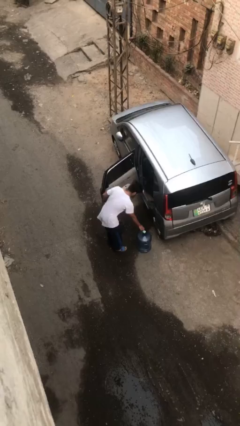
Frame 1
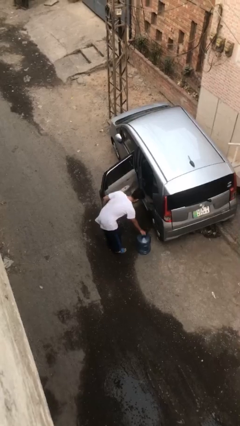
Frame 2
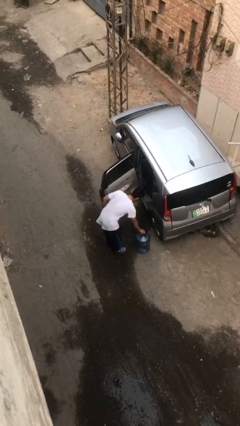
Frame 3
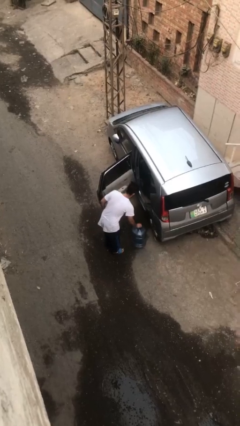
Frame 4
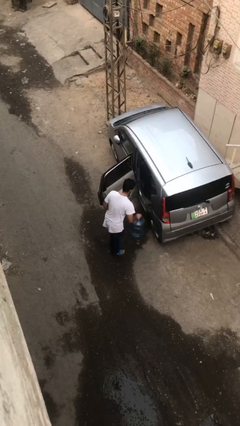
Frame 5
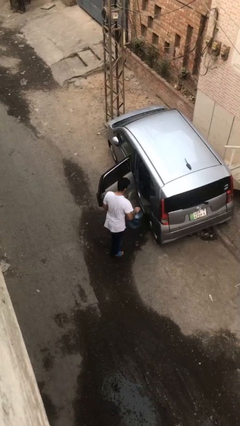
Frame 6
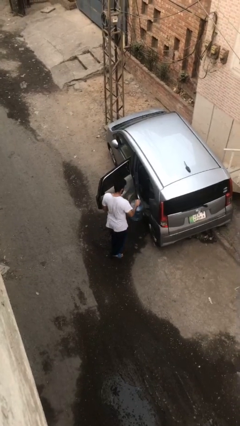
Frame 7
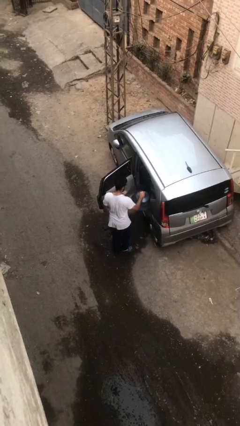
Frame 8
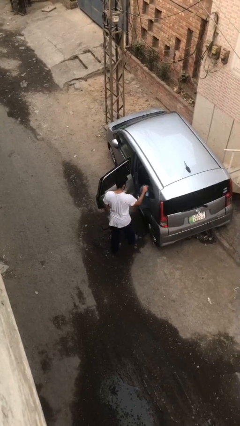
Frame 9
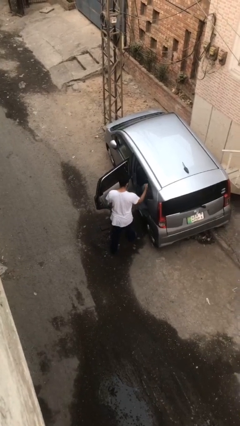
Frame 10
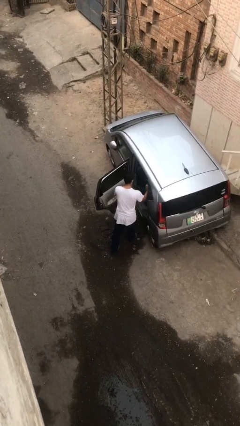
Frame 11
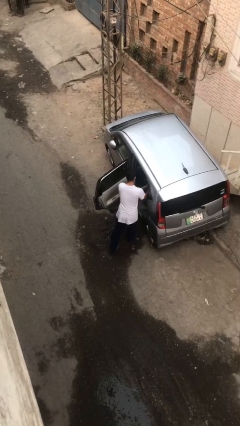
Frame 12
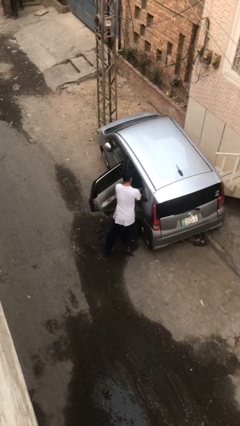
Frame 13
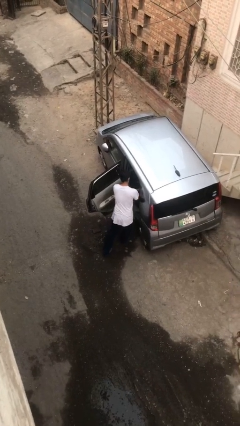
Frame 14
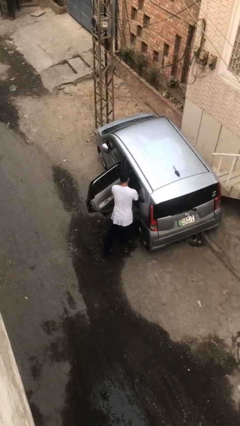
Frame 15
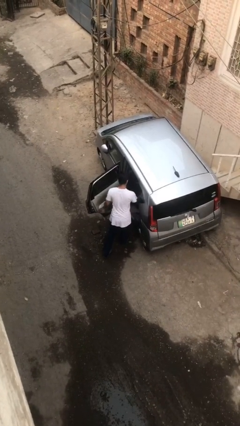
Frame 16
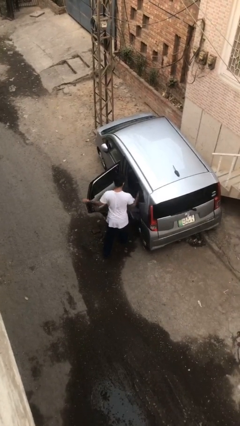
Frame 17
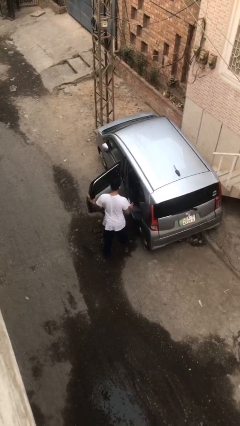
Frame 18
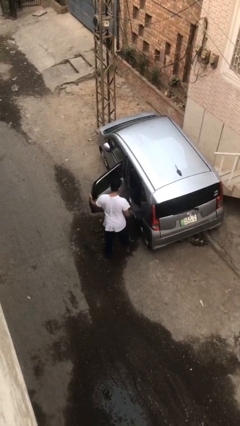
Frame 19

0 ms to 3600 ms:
person loads car

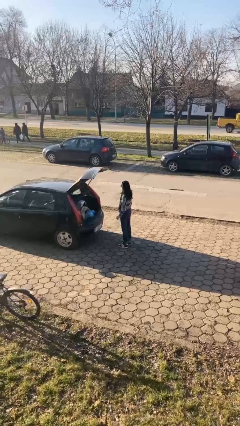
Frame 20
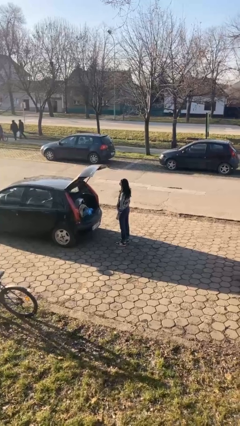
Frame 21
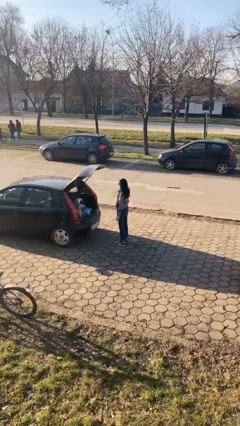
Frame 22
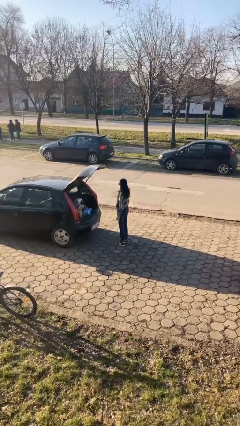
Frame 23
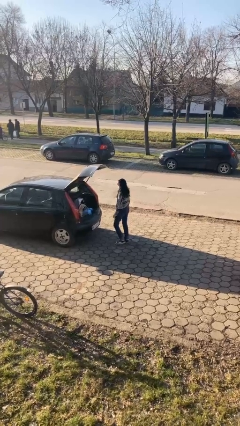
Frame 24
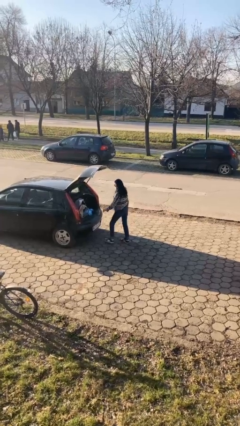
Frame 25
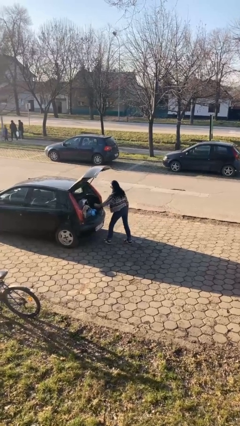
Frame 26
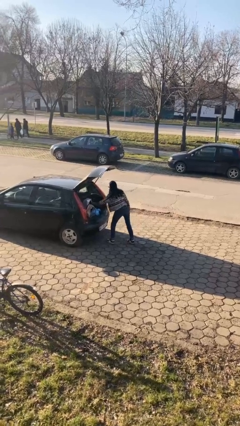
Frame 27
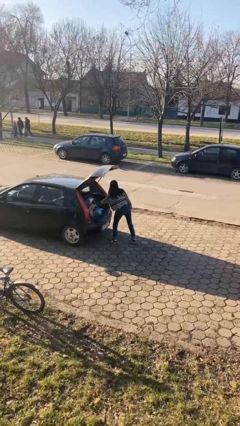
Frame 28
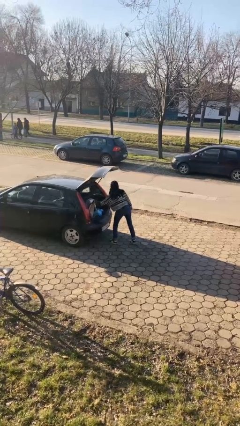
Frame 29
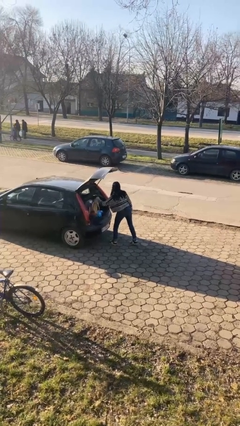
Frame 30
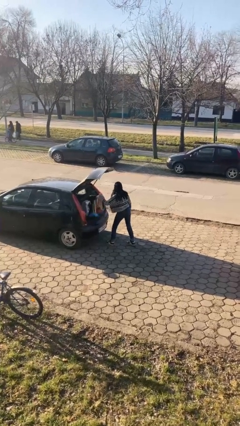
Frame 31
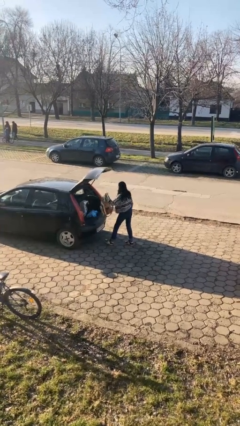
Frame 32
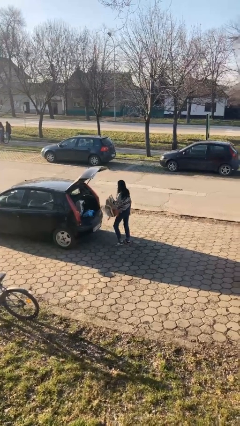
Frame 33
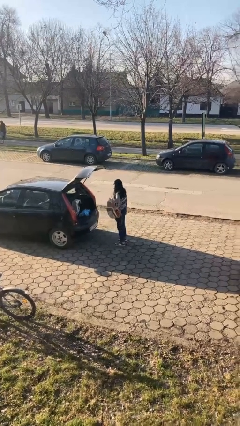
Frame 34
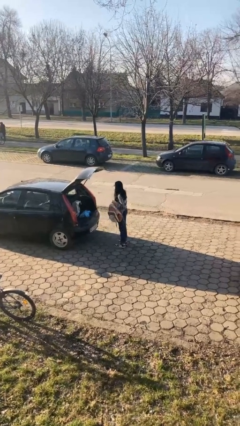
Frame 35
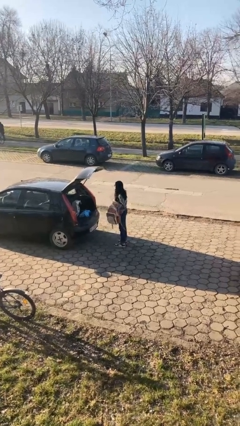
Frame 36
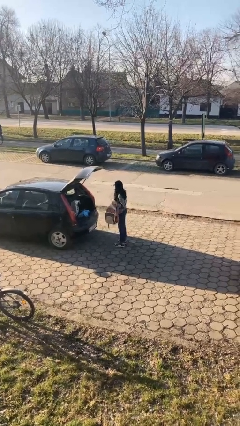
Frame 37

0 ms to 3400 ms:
person unloads car

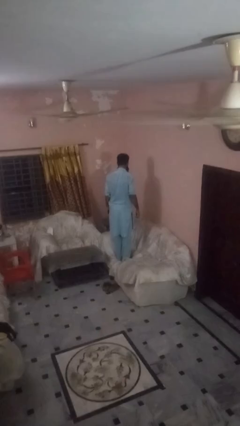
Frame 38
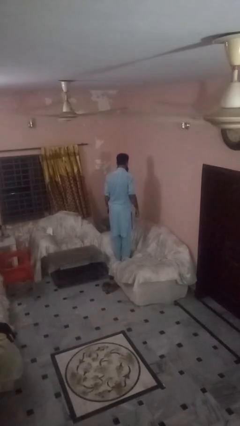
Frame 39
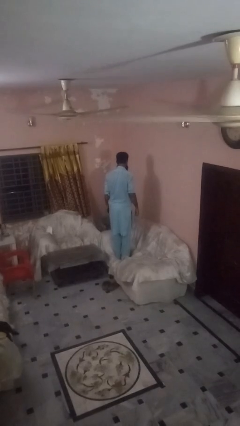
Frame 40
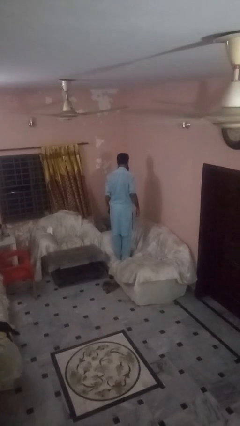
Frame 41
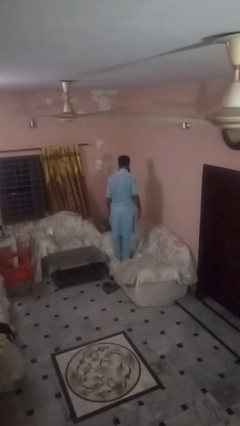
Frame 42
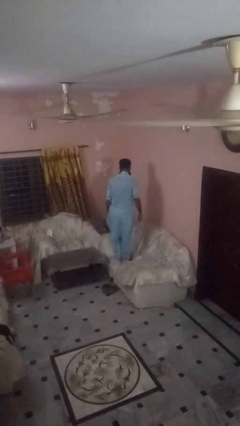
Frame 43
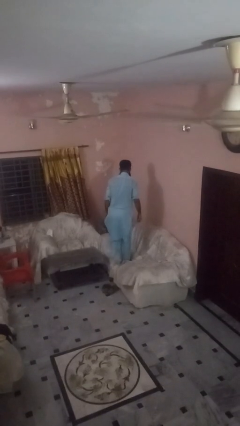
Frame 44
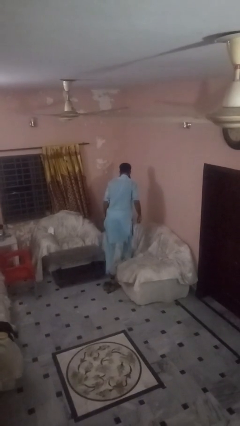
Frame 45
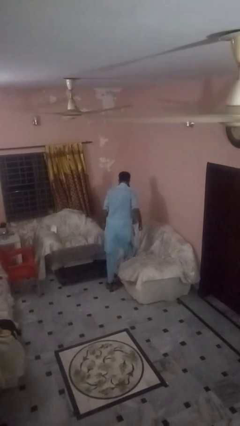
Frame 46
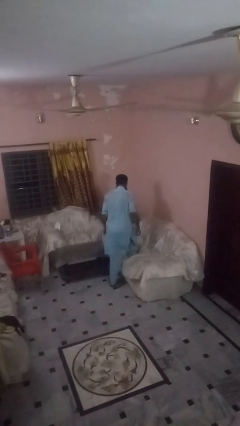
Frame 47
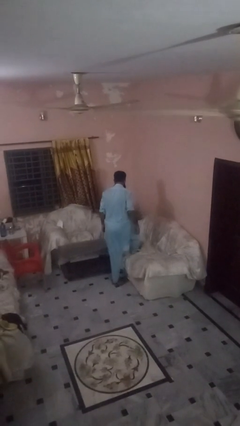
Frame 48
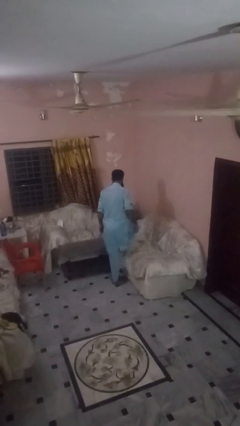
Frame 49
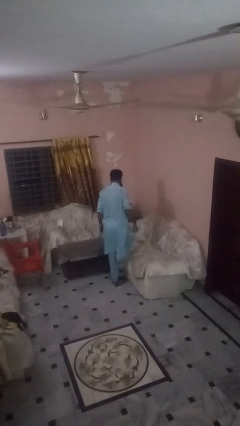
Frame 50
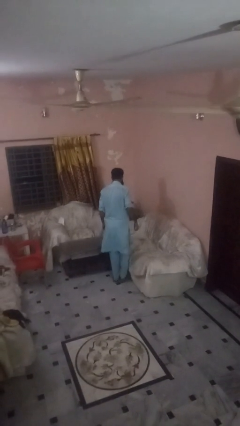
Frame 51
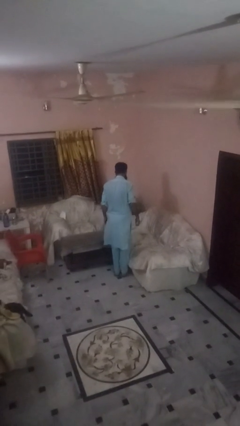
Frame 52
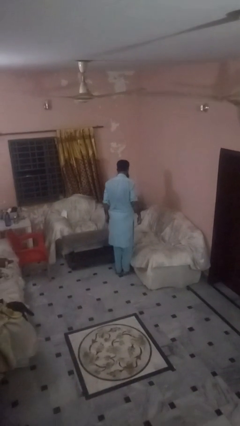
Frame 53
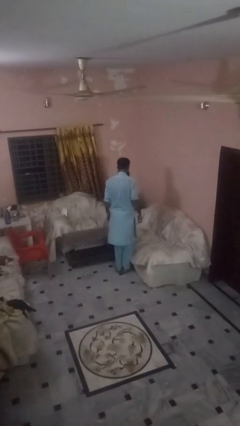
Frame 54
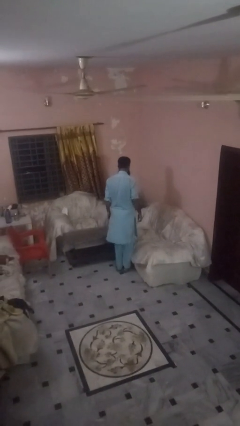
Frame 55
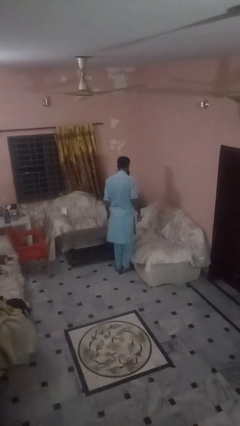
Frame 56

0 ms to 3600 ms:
person climbs off couch

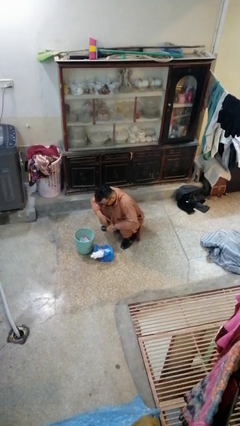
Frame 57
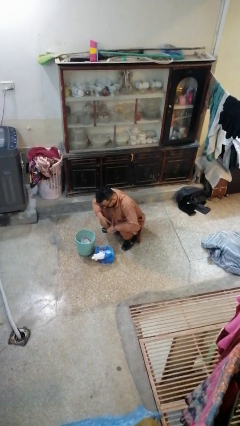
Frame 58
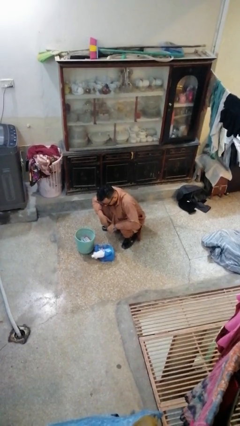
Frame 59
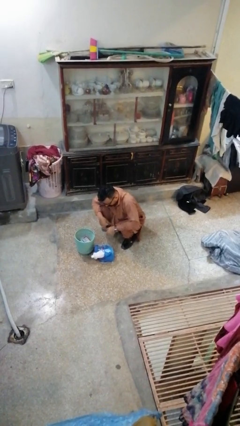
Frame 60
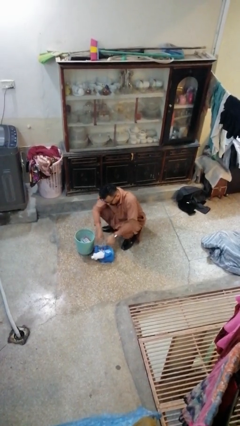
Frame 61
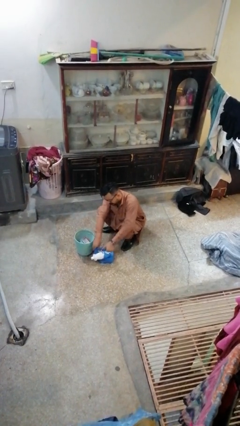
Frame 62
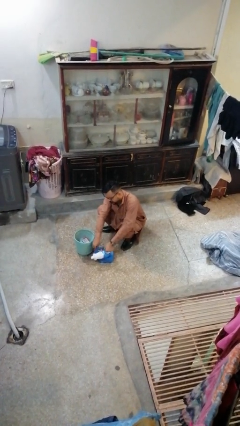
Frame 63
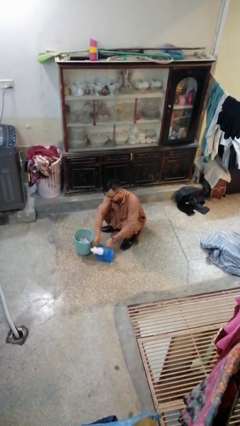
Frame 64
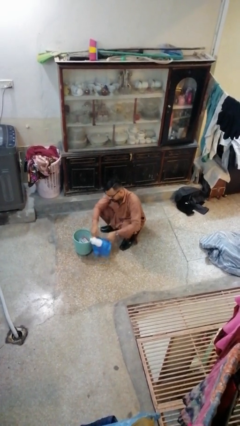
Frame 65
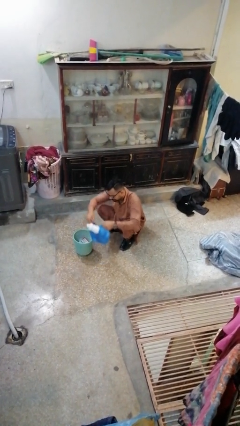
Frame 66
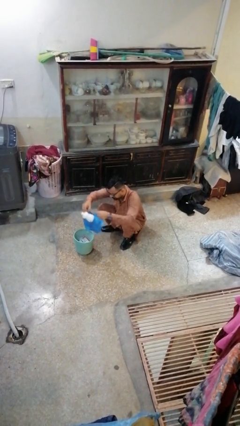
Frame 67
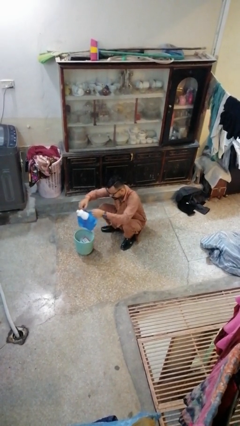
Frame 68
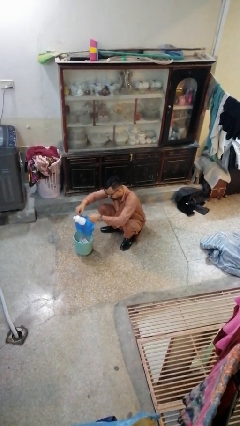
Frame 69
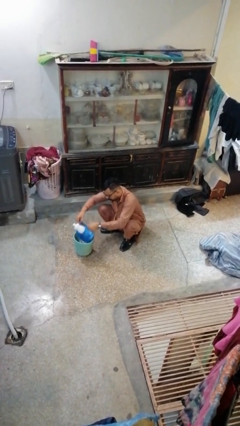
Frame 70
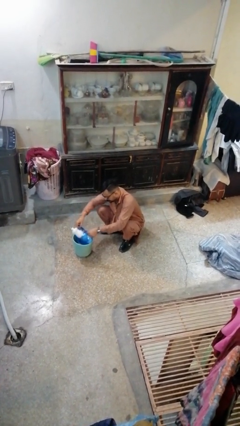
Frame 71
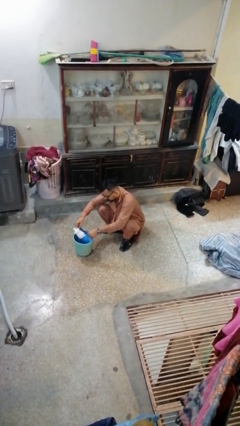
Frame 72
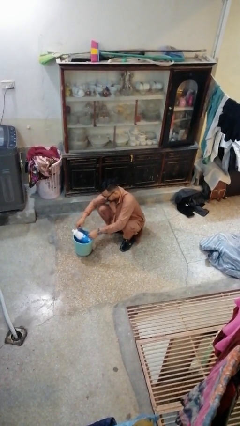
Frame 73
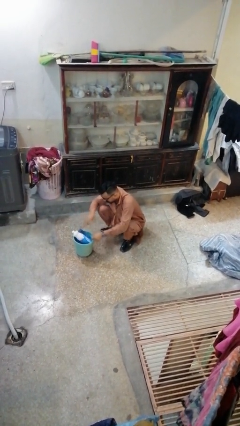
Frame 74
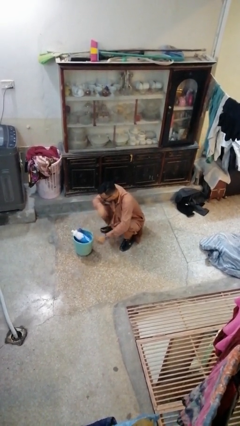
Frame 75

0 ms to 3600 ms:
person inserts trashbag into trashcan

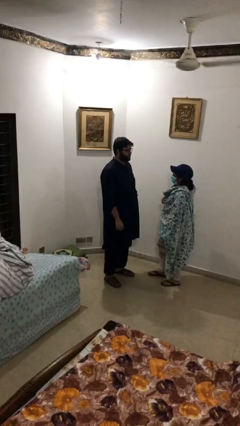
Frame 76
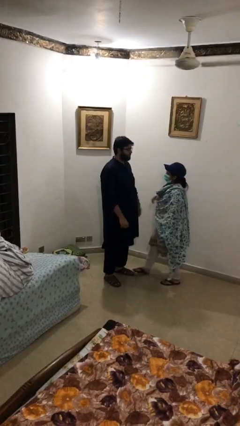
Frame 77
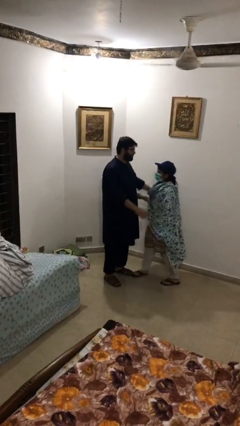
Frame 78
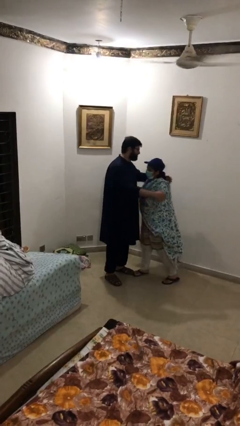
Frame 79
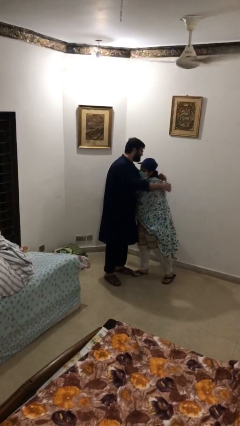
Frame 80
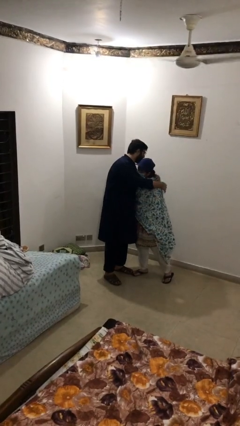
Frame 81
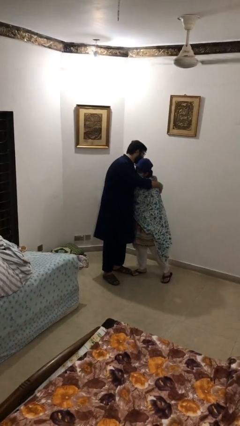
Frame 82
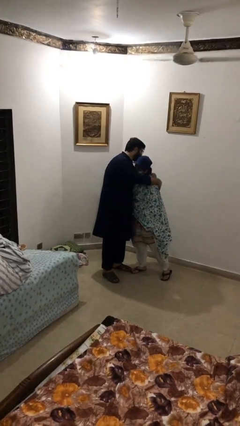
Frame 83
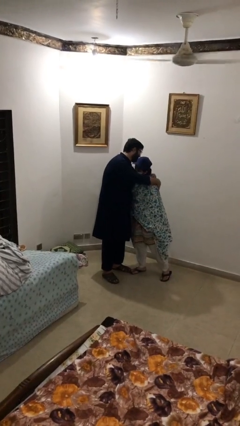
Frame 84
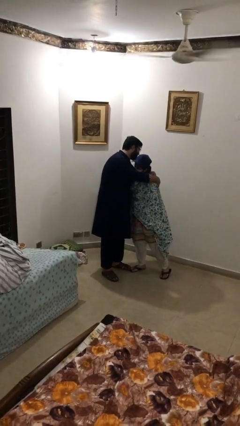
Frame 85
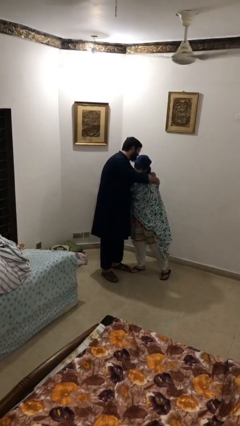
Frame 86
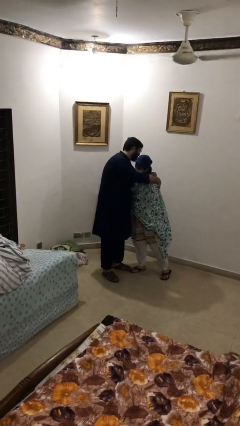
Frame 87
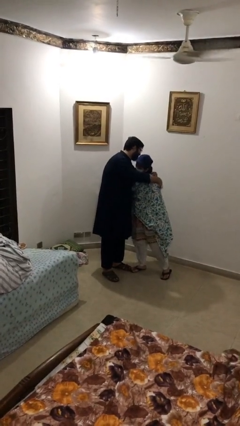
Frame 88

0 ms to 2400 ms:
person embraces person

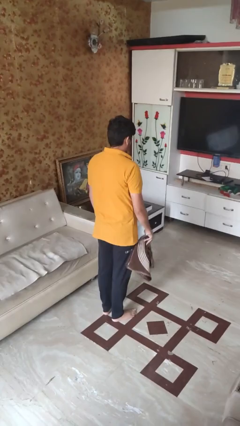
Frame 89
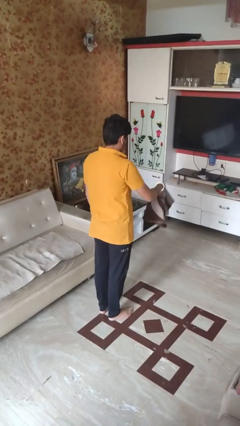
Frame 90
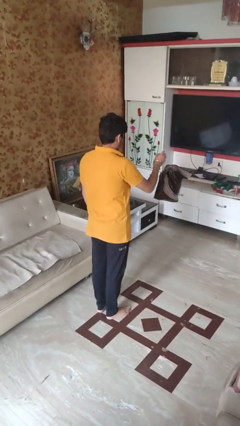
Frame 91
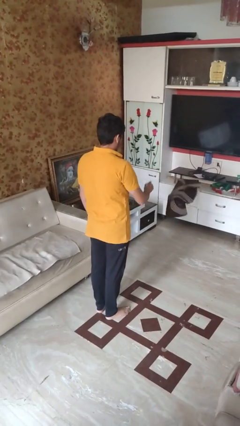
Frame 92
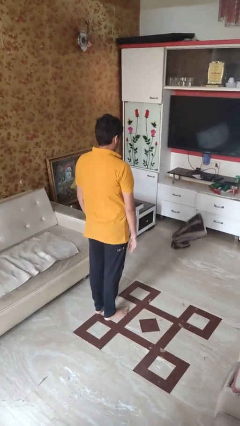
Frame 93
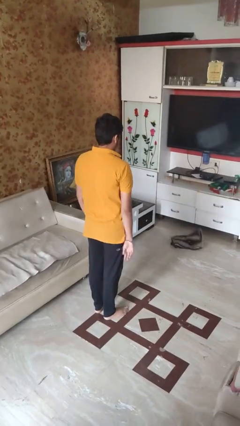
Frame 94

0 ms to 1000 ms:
person throws object to ground
